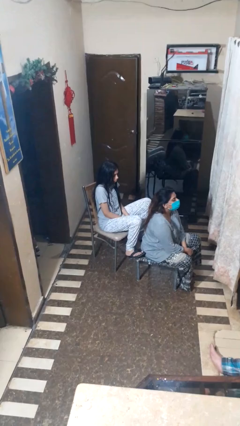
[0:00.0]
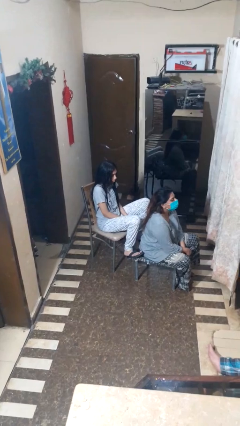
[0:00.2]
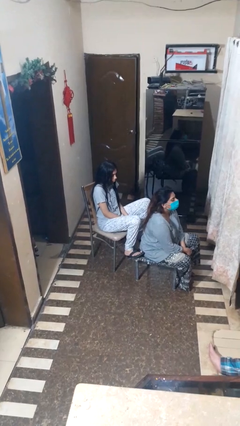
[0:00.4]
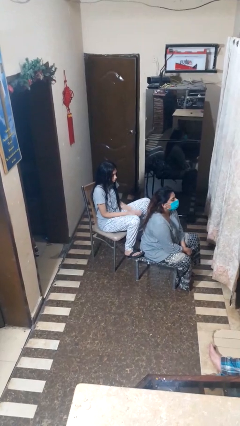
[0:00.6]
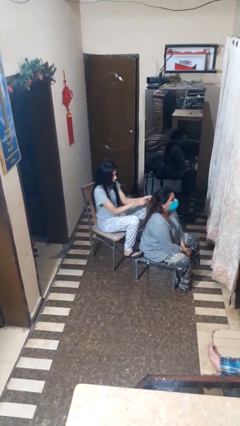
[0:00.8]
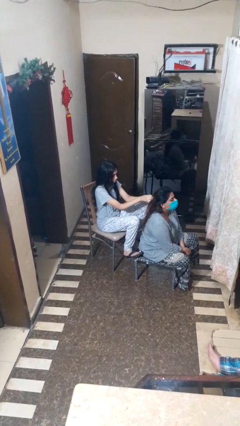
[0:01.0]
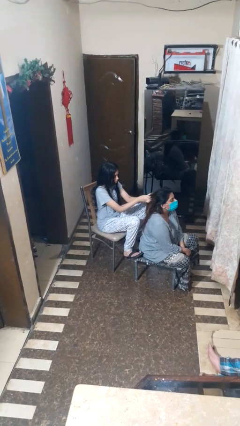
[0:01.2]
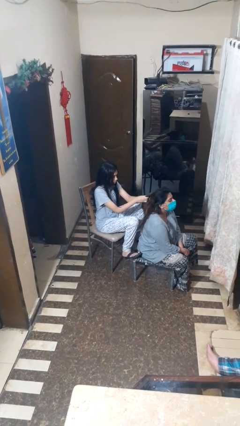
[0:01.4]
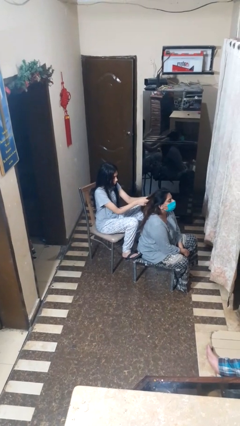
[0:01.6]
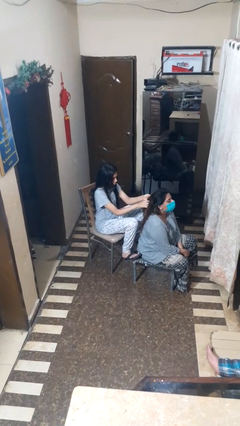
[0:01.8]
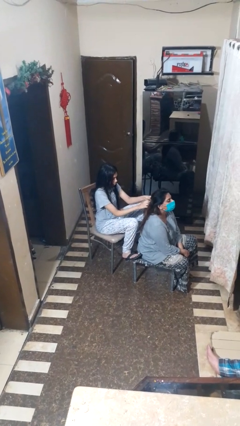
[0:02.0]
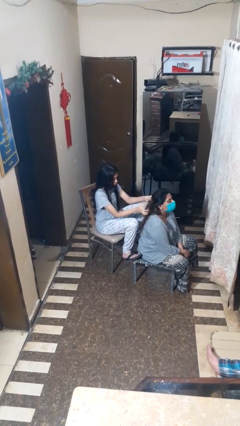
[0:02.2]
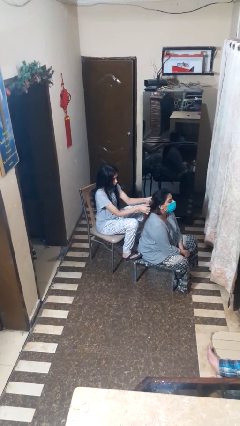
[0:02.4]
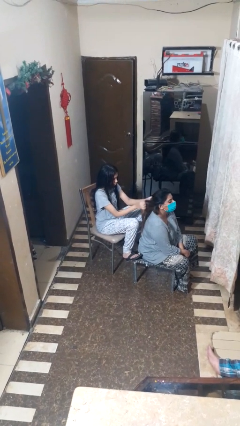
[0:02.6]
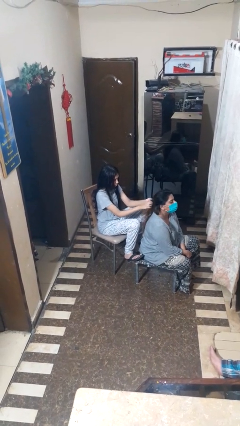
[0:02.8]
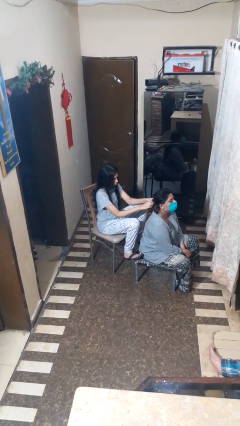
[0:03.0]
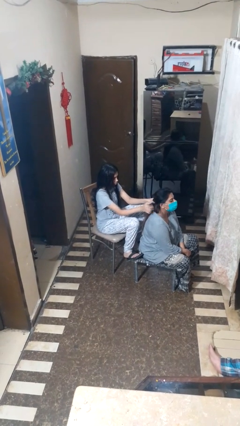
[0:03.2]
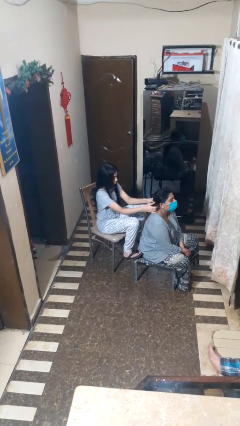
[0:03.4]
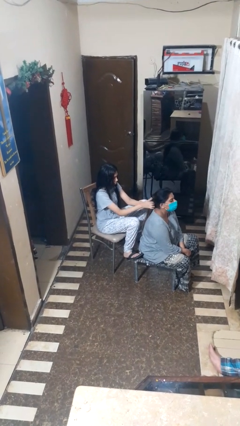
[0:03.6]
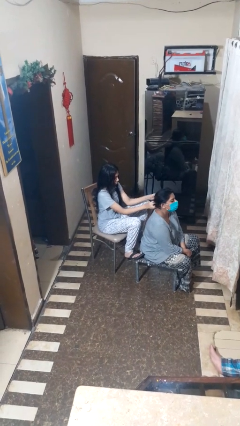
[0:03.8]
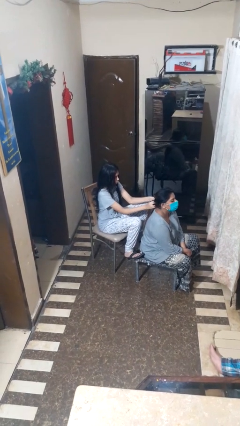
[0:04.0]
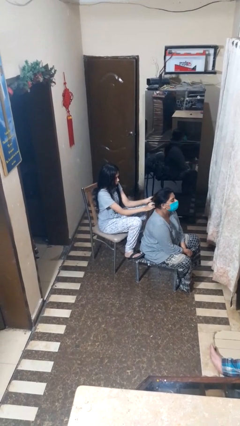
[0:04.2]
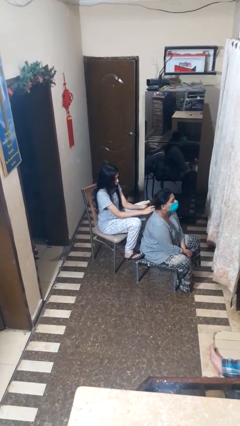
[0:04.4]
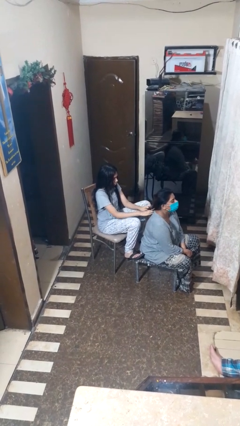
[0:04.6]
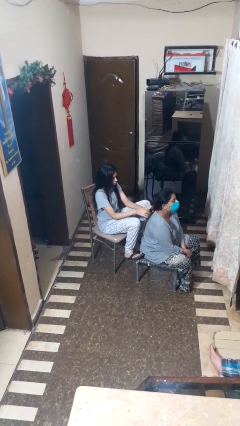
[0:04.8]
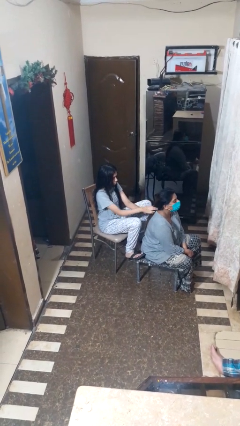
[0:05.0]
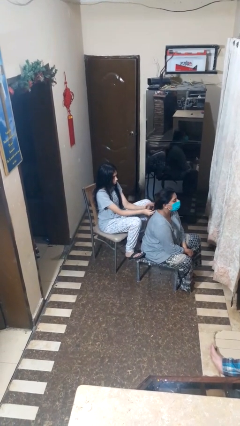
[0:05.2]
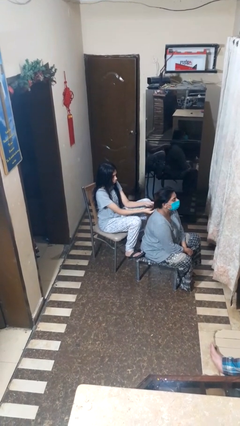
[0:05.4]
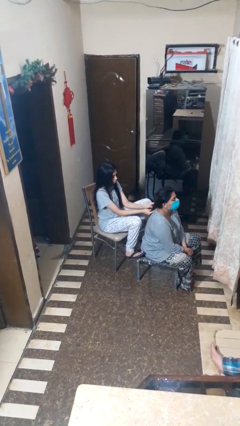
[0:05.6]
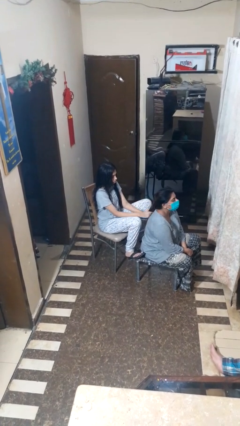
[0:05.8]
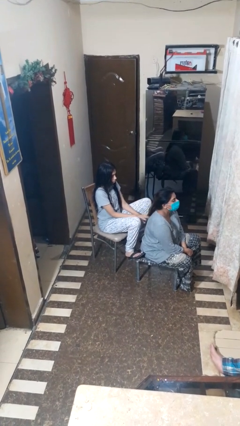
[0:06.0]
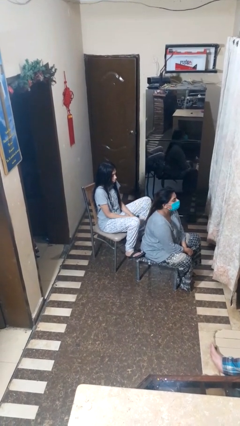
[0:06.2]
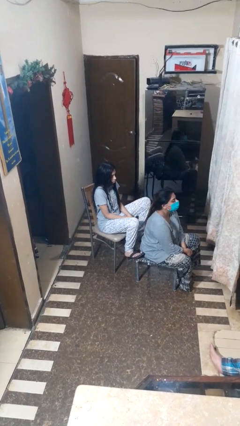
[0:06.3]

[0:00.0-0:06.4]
person braids hair of person

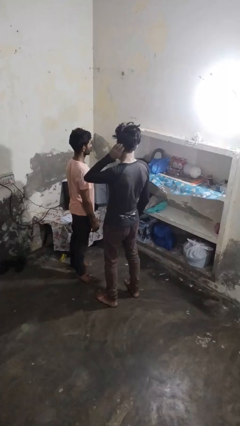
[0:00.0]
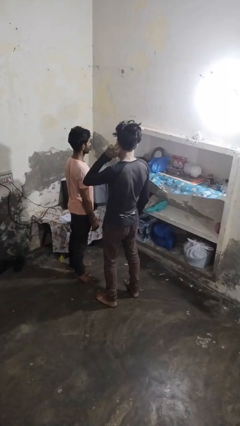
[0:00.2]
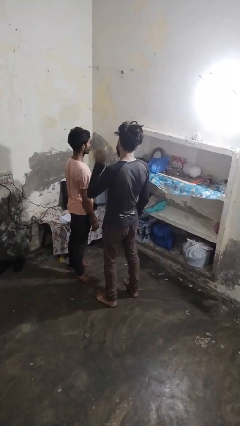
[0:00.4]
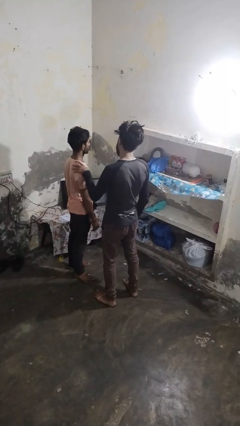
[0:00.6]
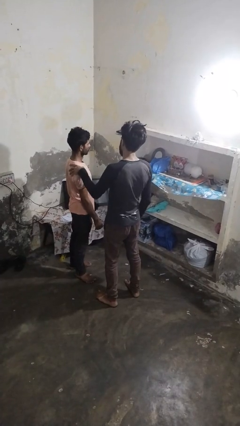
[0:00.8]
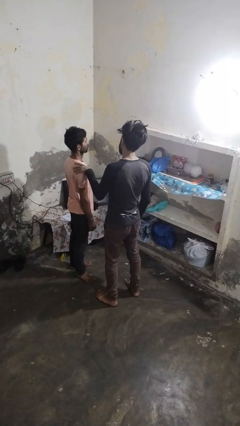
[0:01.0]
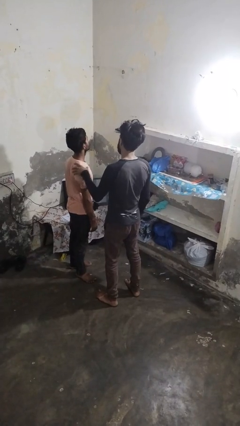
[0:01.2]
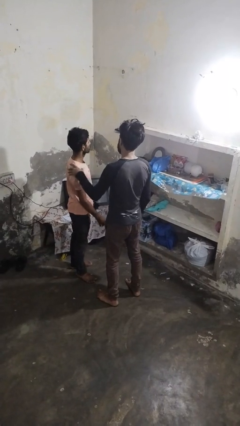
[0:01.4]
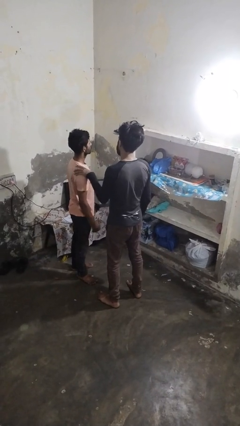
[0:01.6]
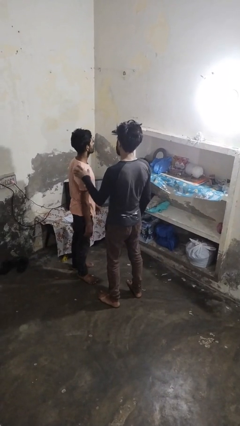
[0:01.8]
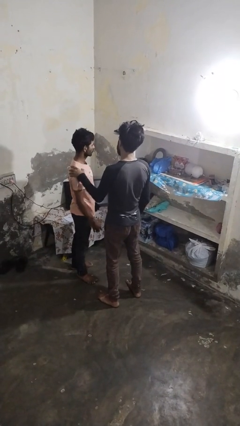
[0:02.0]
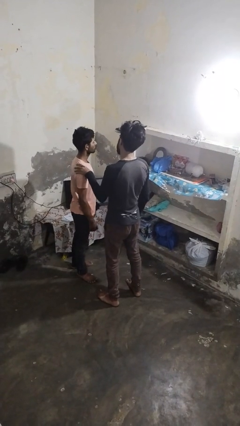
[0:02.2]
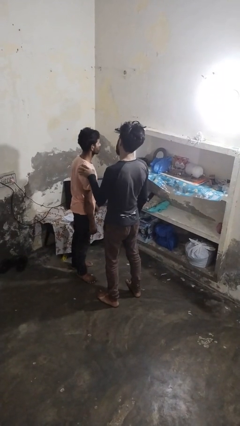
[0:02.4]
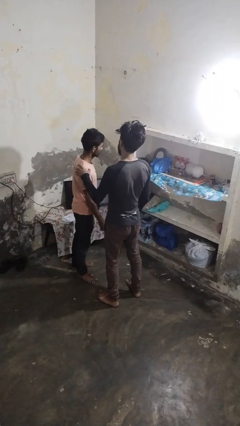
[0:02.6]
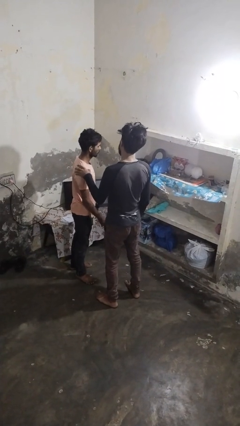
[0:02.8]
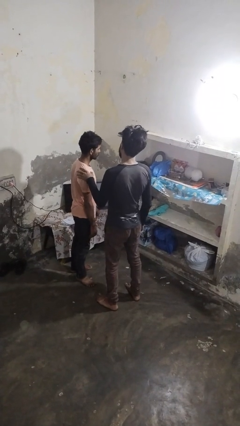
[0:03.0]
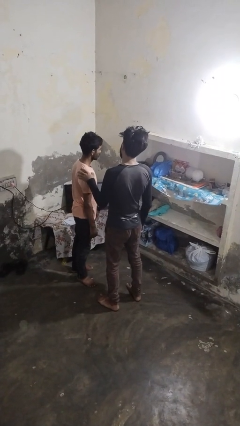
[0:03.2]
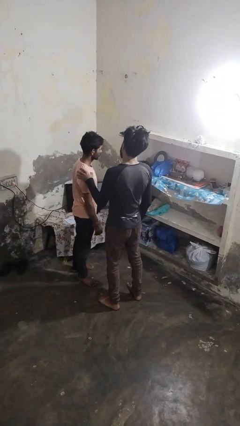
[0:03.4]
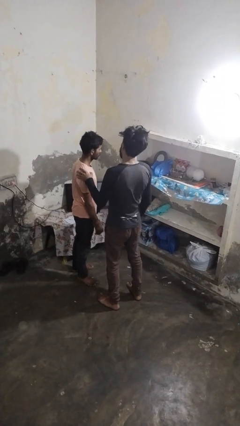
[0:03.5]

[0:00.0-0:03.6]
person grabs person by shoulder

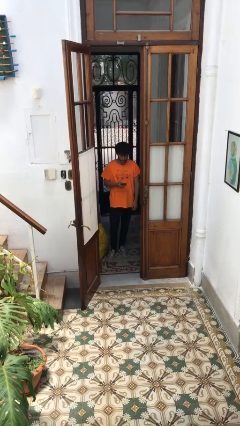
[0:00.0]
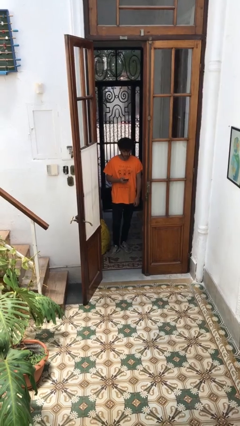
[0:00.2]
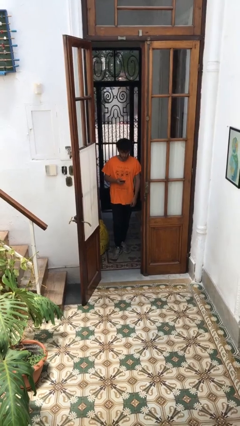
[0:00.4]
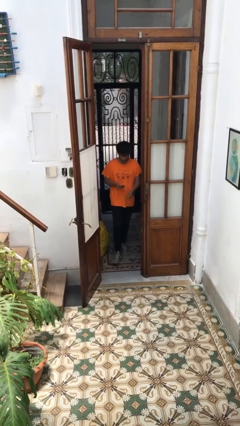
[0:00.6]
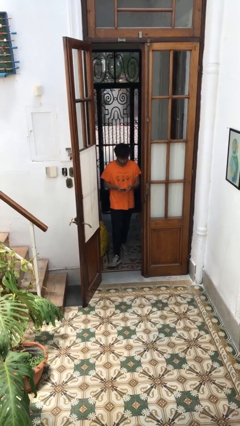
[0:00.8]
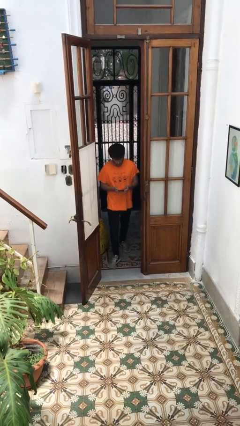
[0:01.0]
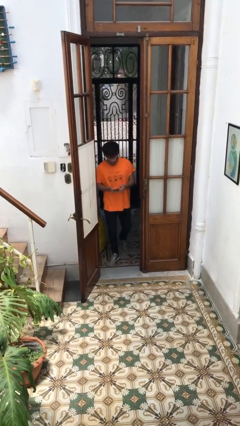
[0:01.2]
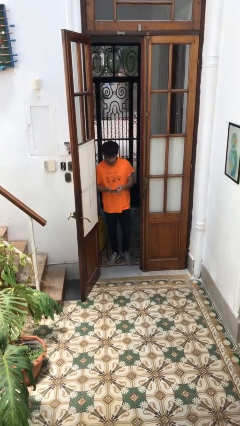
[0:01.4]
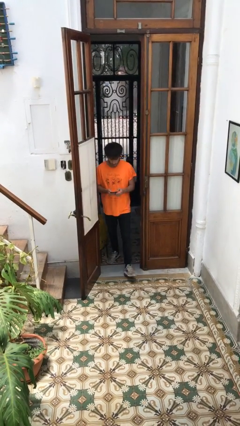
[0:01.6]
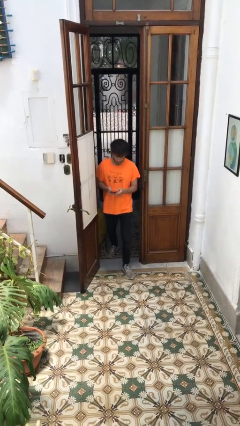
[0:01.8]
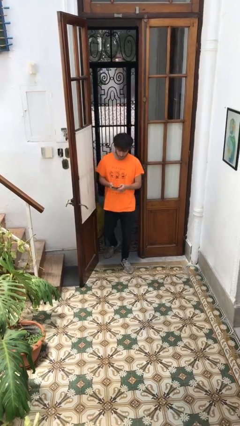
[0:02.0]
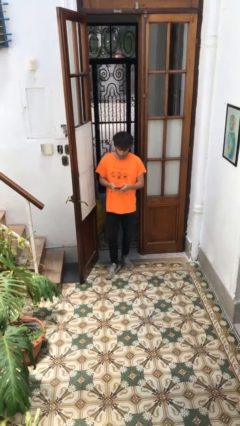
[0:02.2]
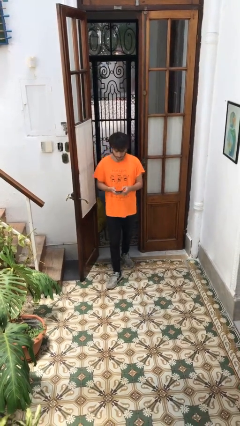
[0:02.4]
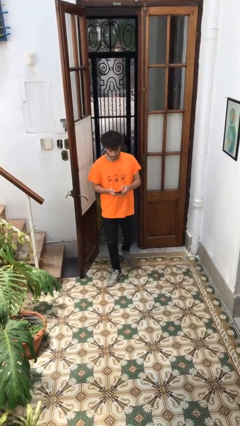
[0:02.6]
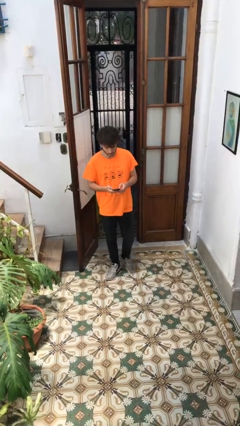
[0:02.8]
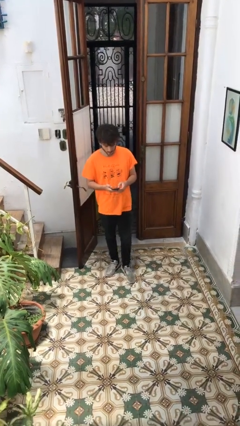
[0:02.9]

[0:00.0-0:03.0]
person enters scene through structure

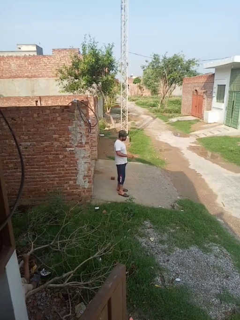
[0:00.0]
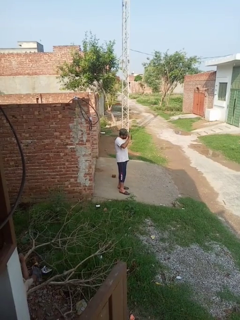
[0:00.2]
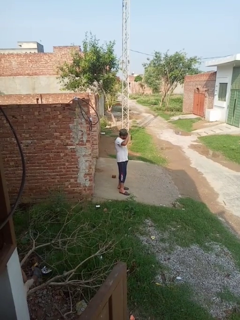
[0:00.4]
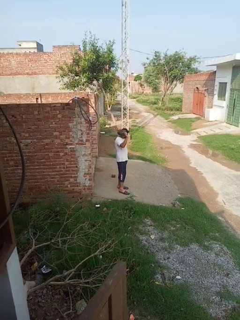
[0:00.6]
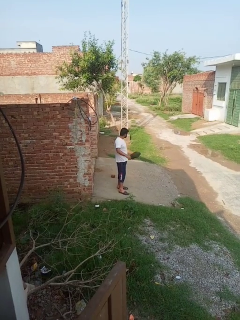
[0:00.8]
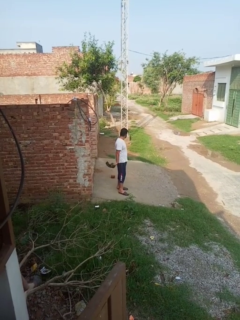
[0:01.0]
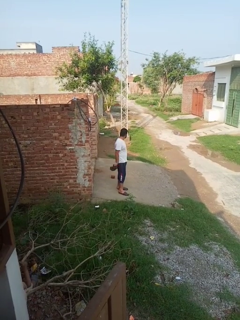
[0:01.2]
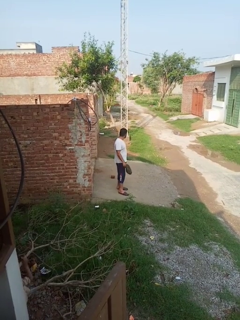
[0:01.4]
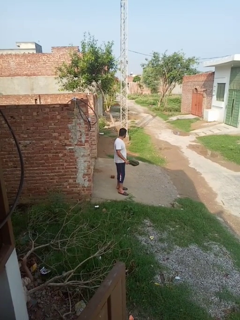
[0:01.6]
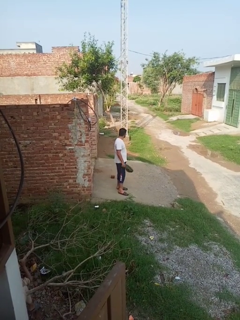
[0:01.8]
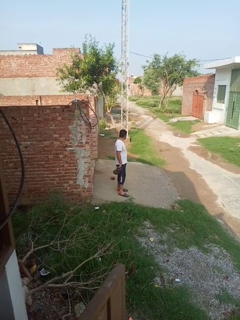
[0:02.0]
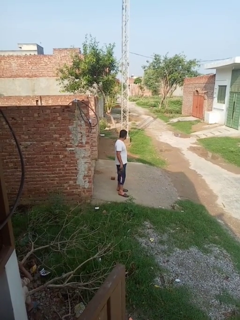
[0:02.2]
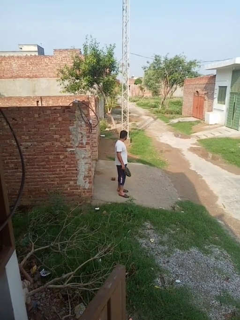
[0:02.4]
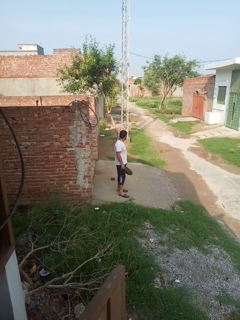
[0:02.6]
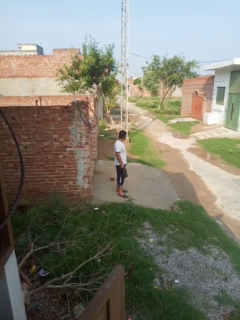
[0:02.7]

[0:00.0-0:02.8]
person takes off hat

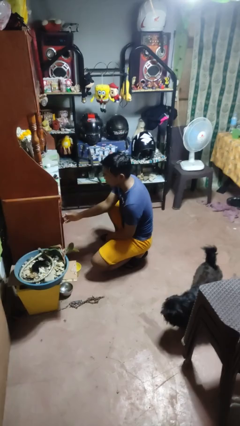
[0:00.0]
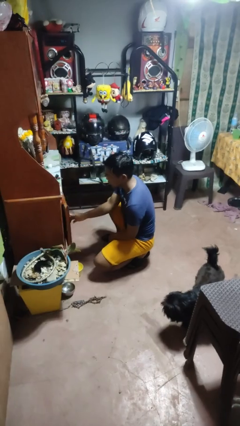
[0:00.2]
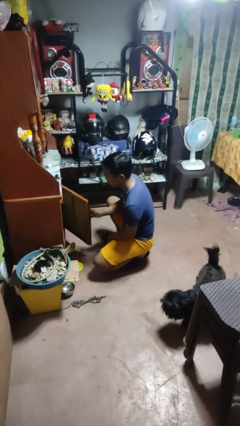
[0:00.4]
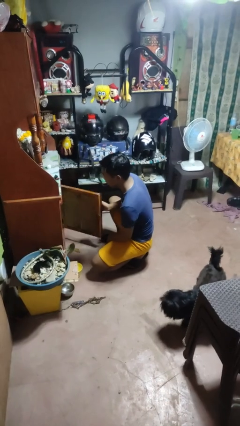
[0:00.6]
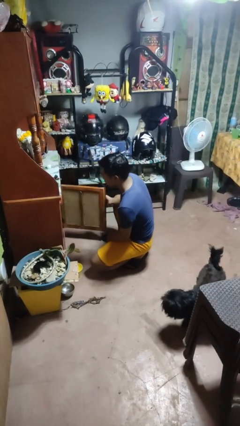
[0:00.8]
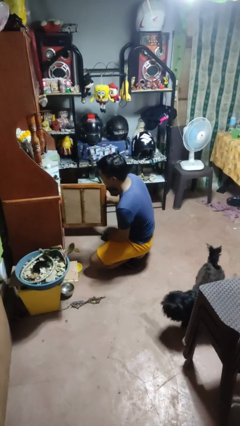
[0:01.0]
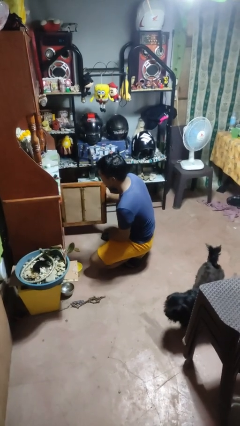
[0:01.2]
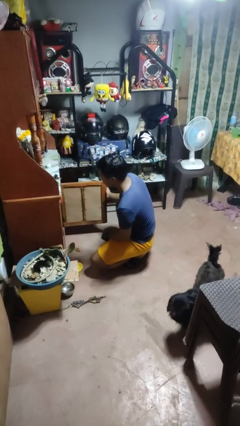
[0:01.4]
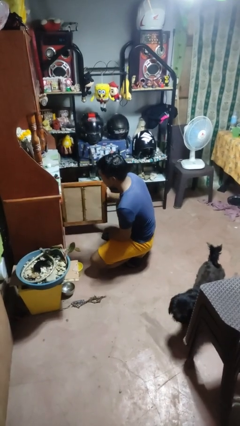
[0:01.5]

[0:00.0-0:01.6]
person opens cabinet

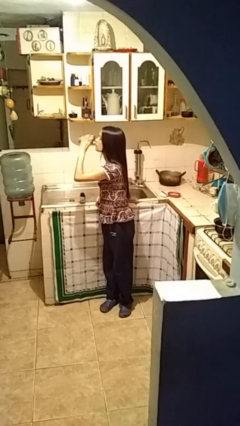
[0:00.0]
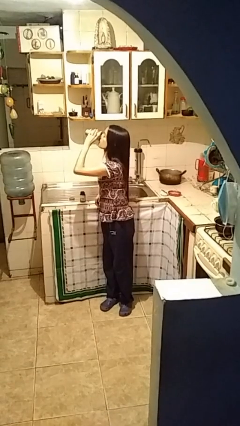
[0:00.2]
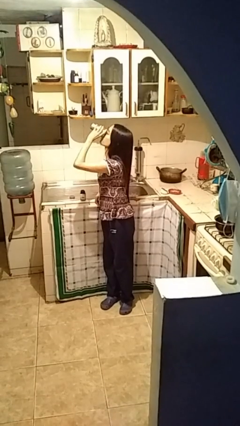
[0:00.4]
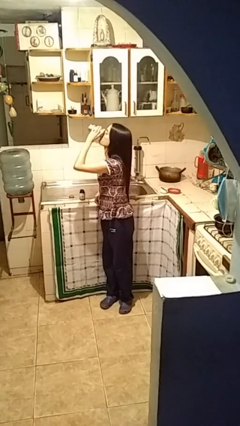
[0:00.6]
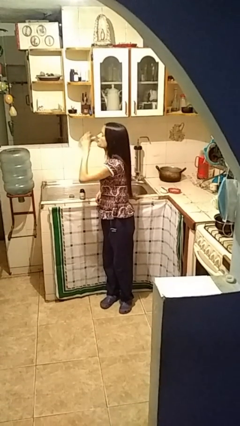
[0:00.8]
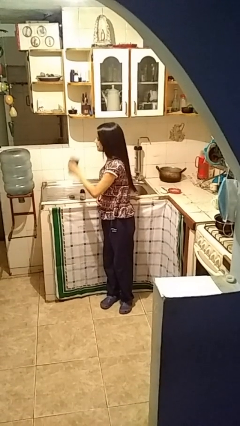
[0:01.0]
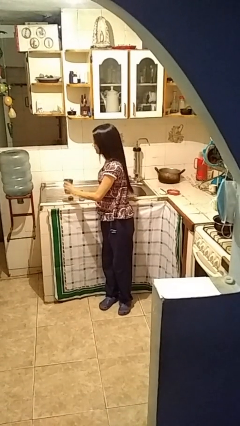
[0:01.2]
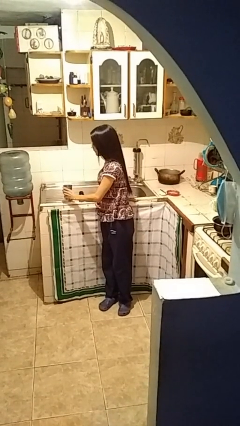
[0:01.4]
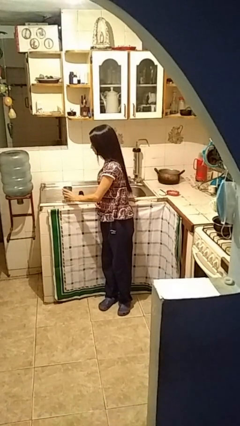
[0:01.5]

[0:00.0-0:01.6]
person drinks from cup
